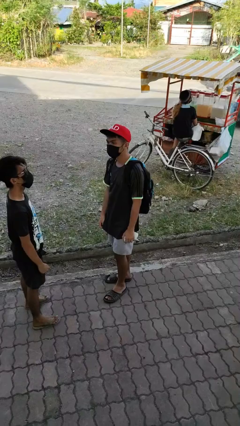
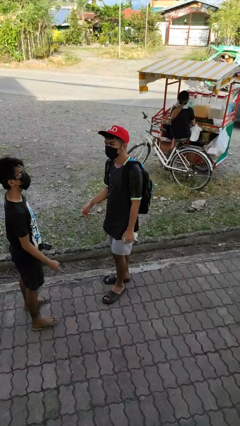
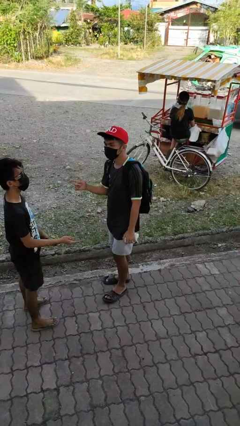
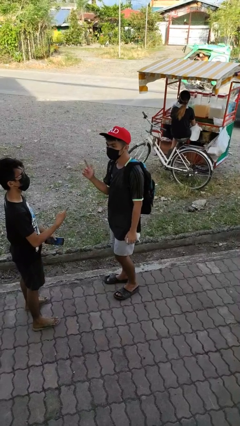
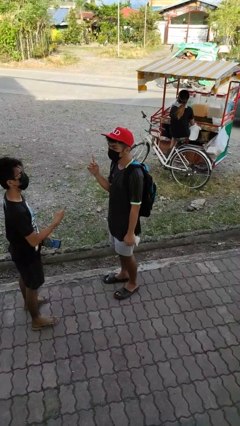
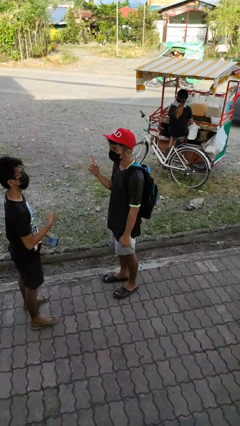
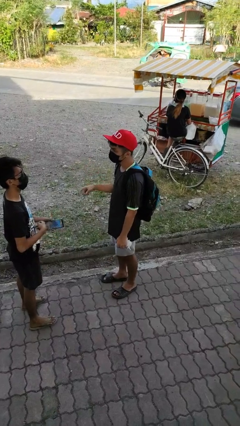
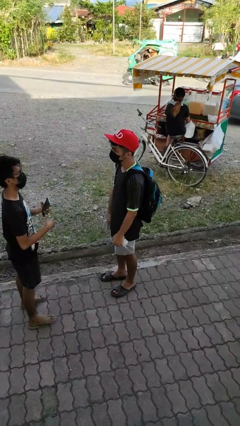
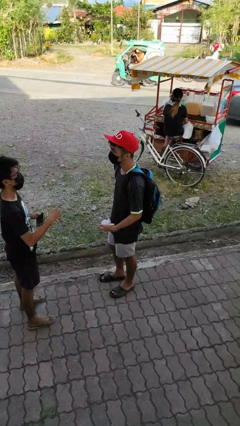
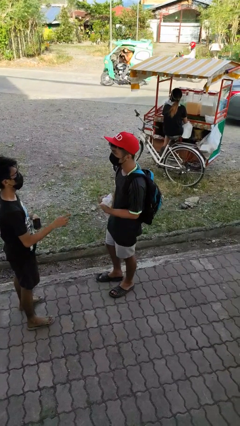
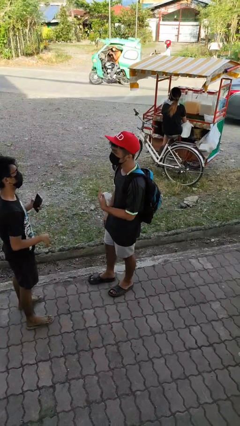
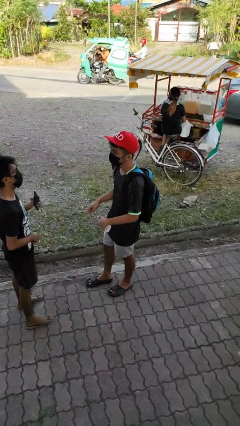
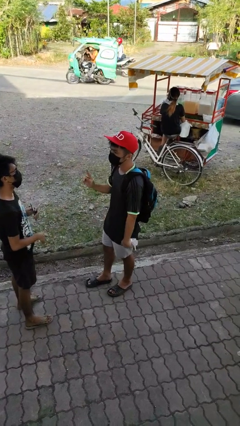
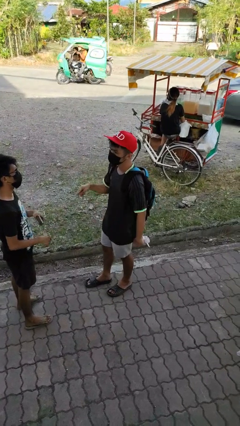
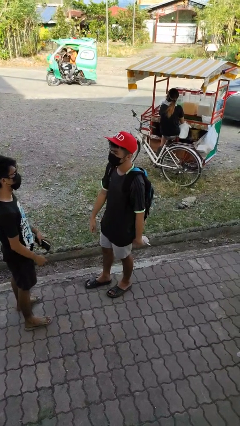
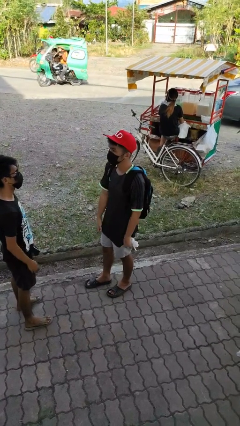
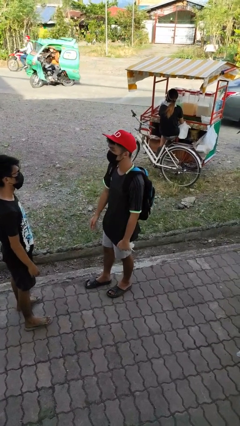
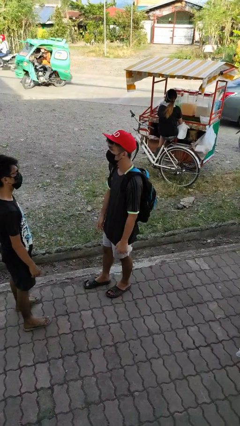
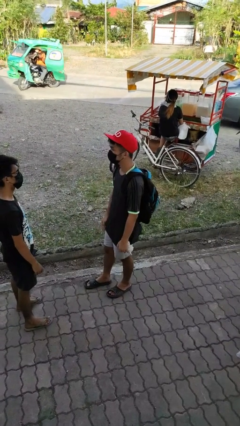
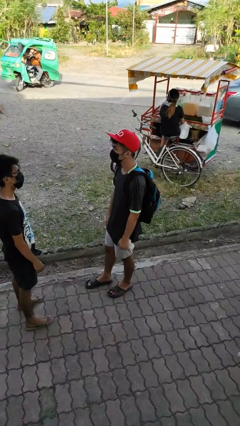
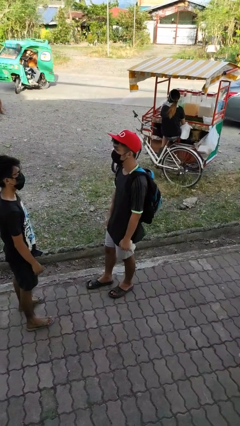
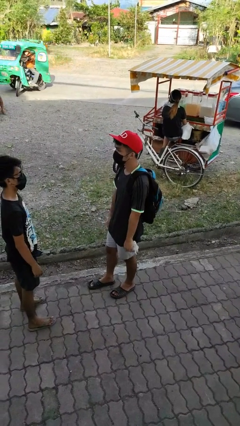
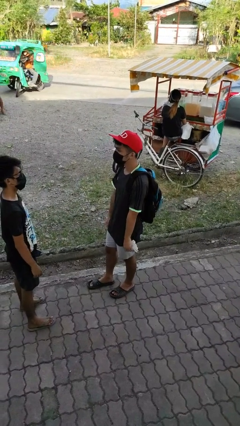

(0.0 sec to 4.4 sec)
person talks to person

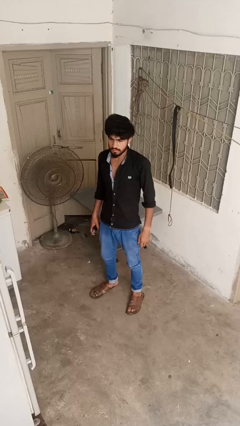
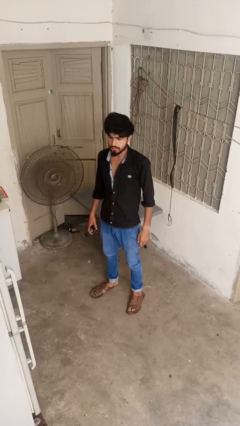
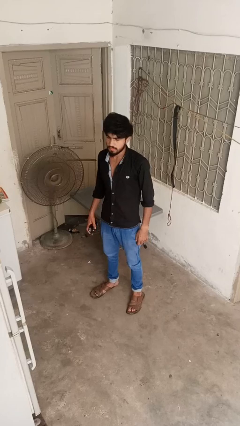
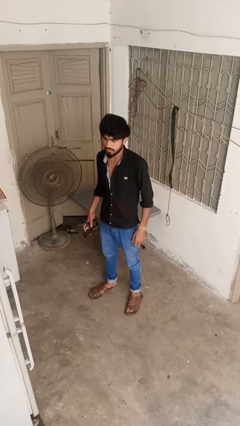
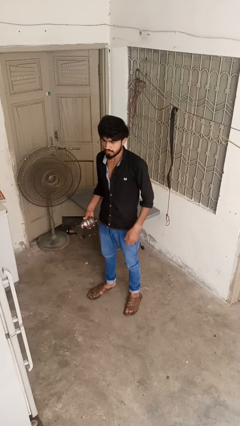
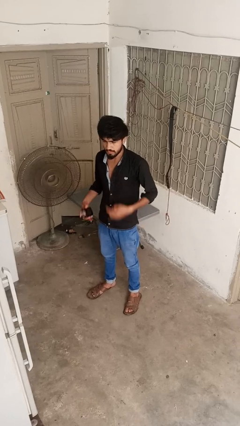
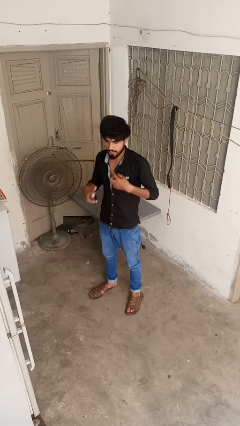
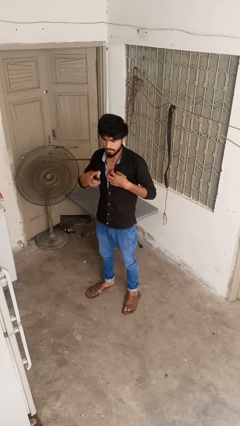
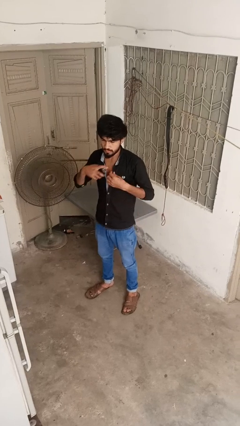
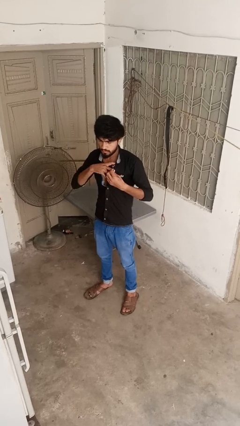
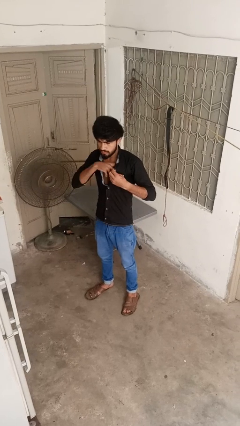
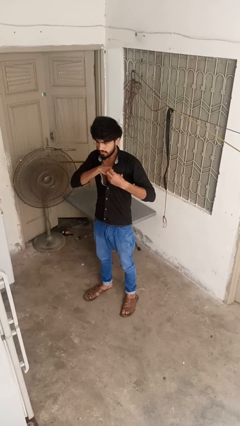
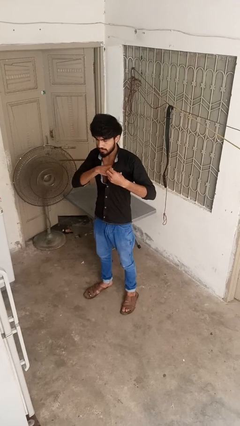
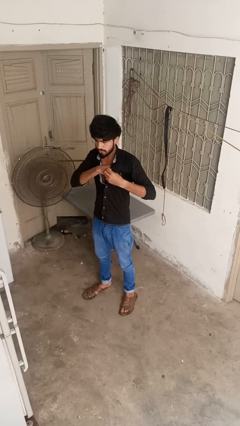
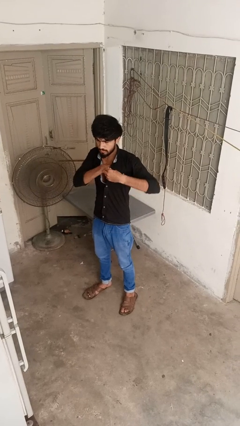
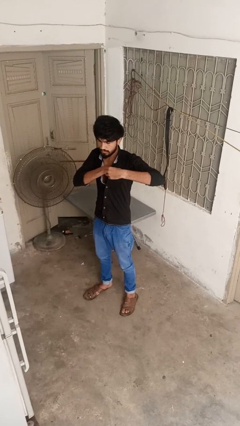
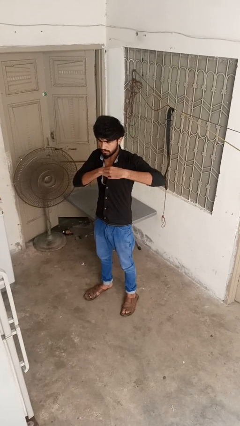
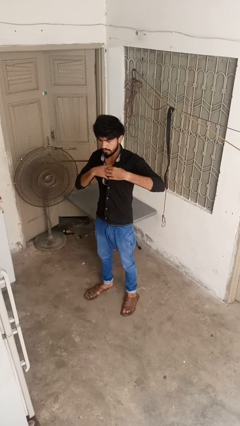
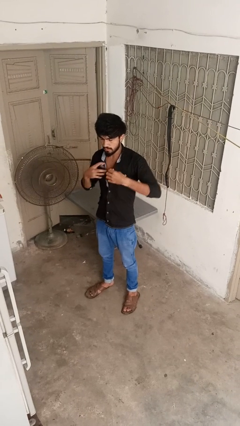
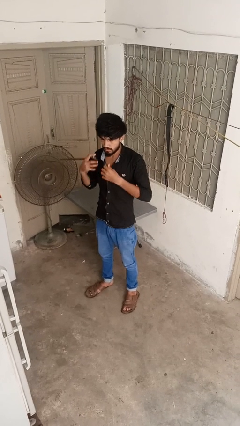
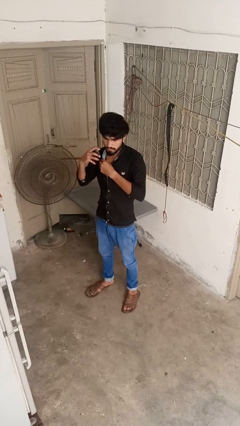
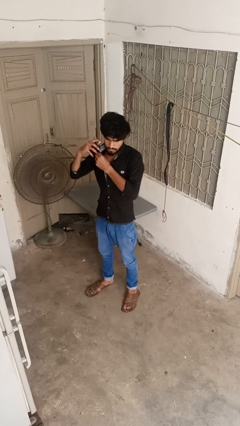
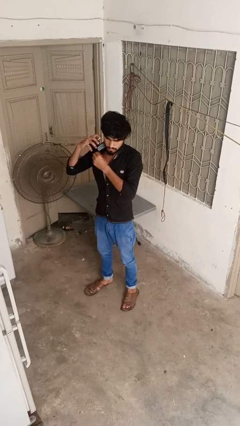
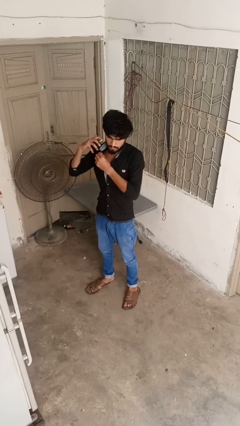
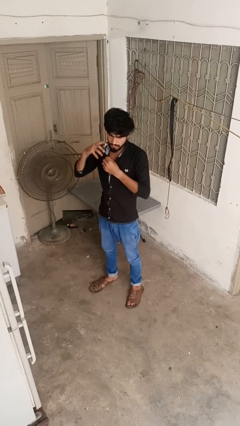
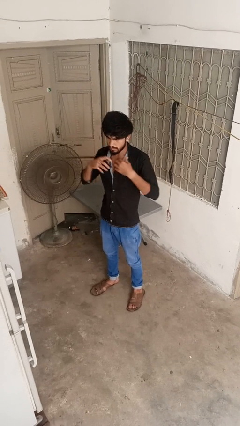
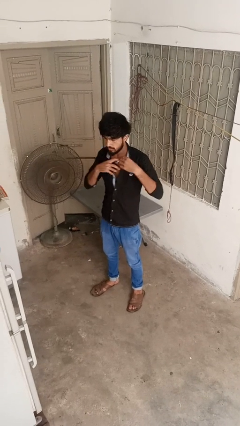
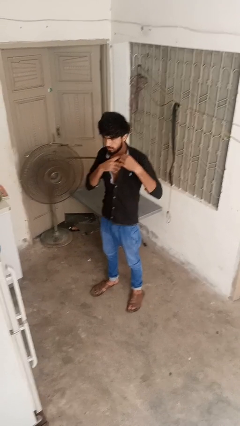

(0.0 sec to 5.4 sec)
person applies deodorant

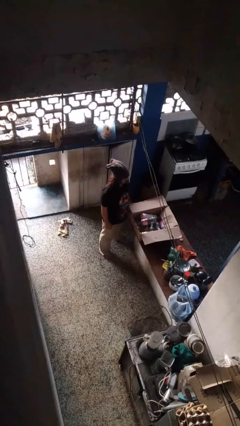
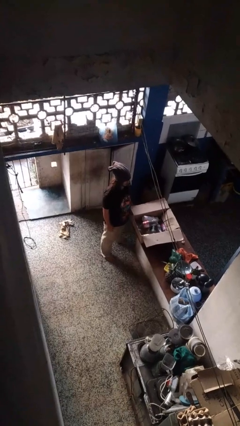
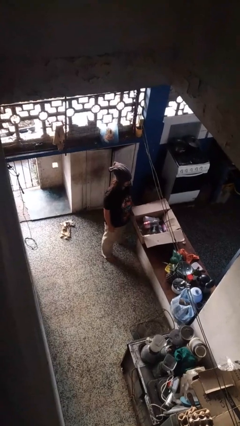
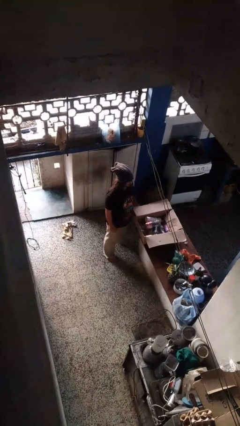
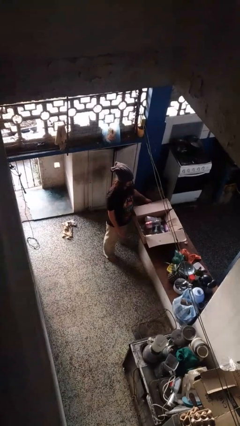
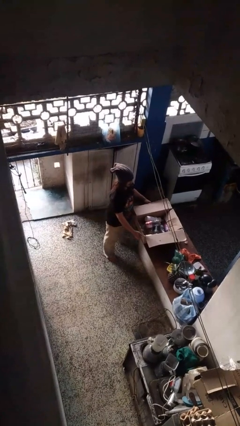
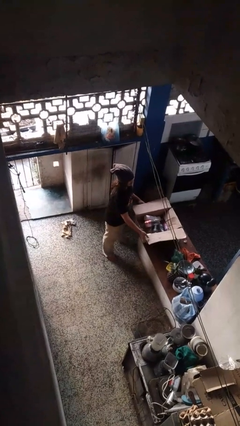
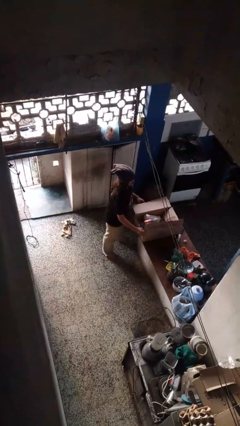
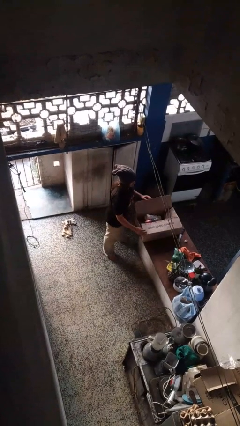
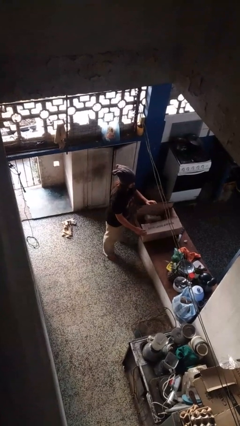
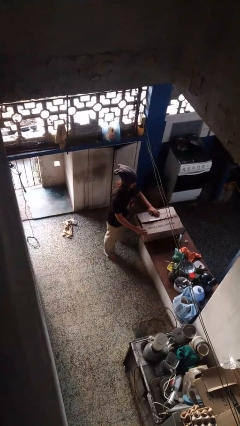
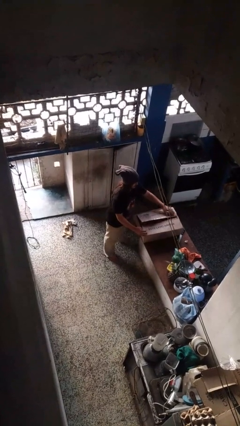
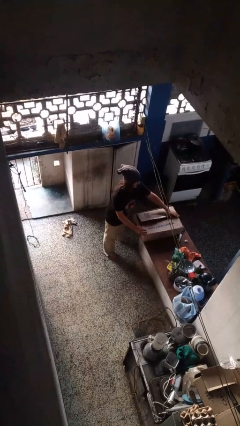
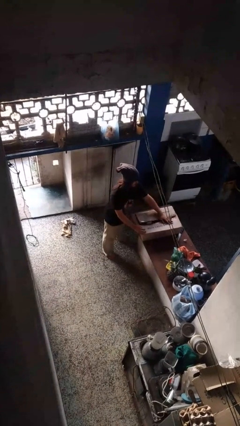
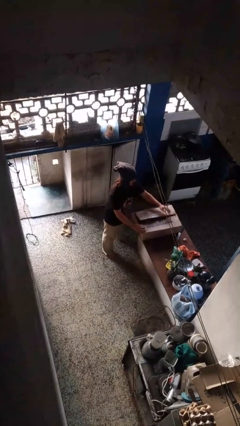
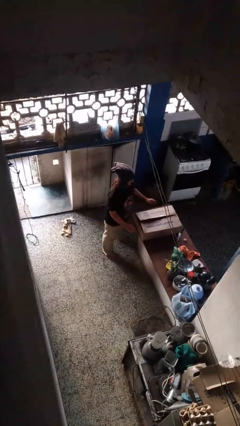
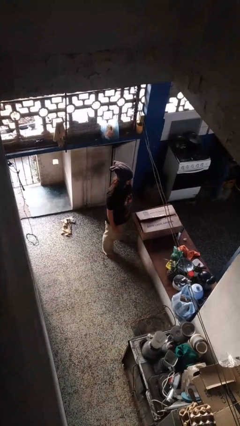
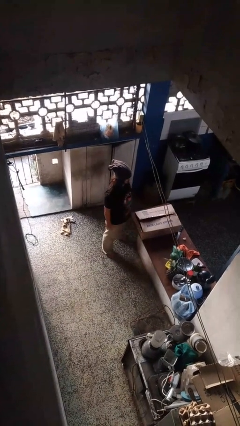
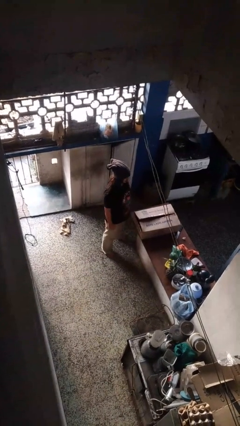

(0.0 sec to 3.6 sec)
person closes box

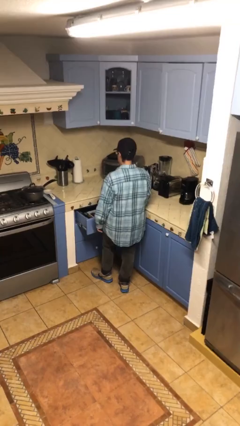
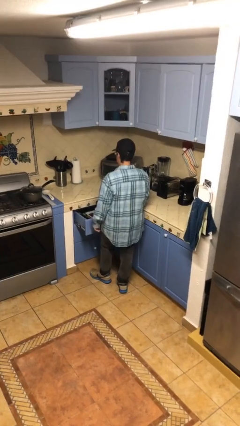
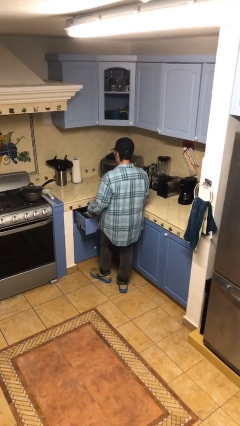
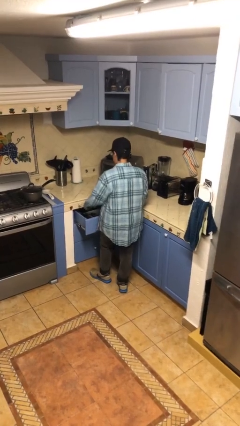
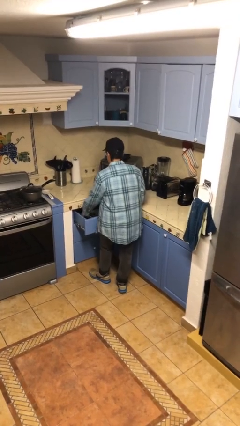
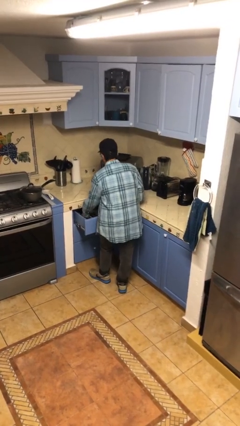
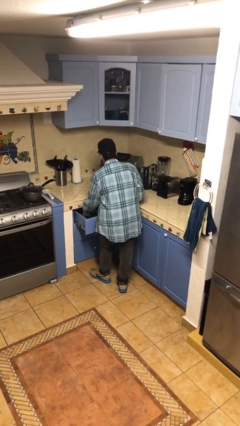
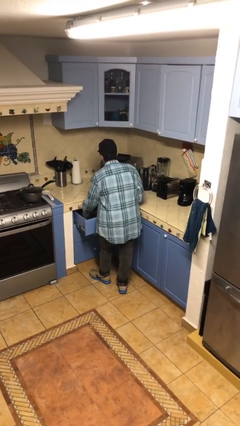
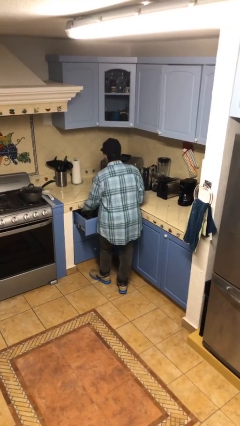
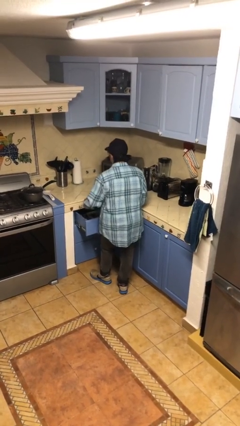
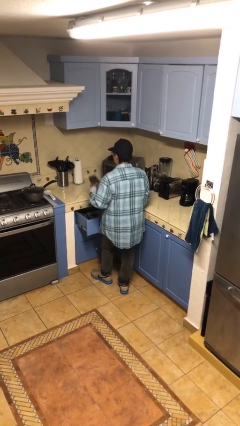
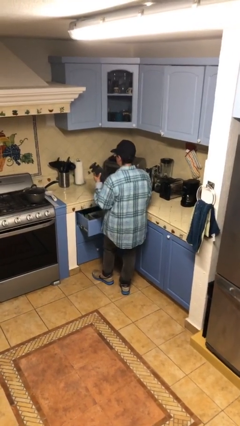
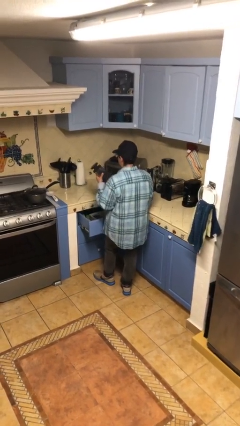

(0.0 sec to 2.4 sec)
person takes object from kitchen drawer

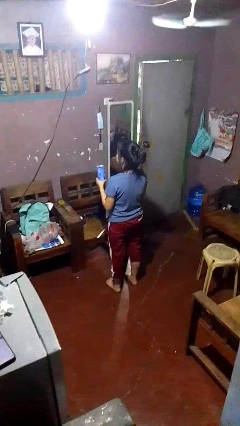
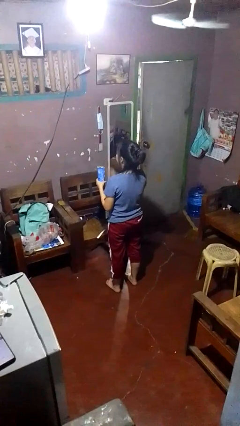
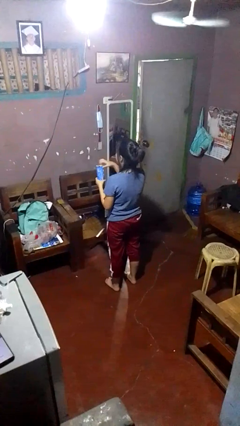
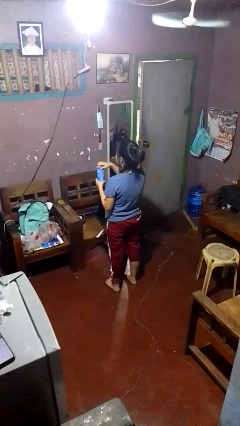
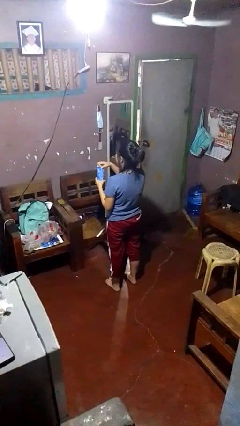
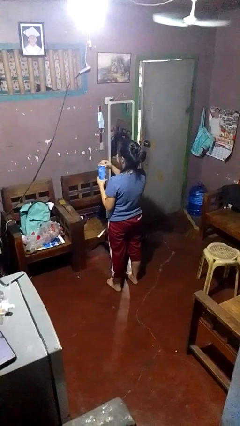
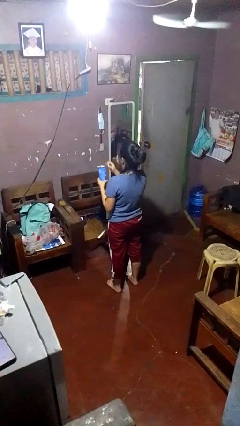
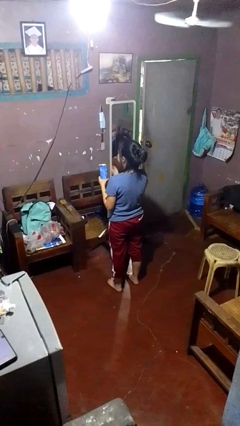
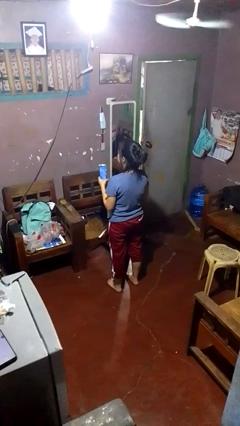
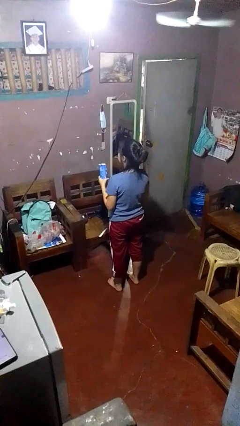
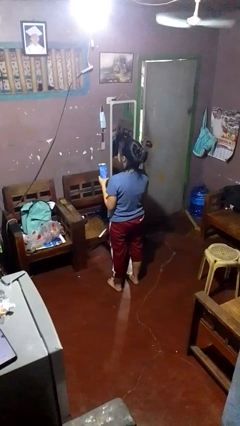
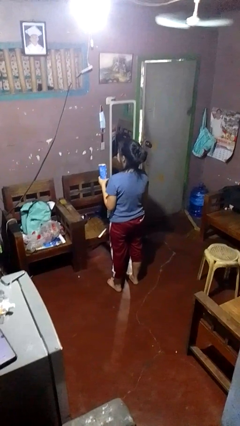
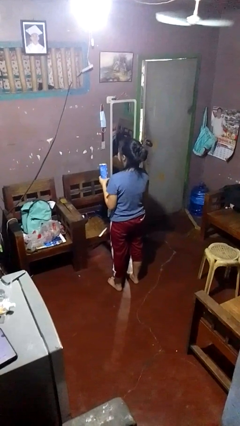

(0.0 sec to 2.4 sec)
person opens beverage can
